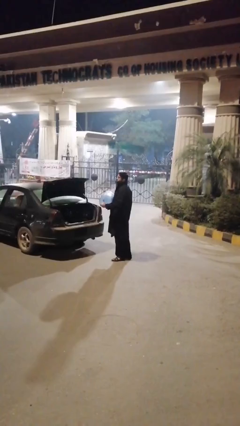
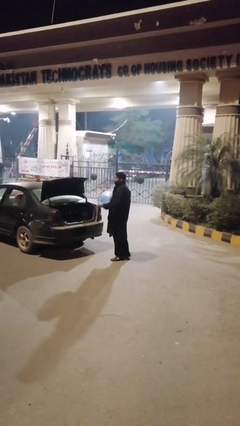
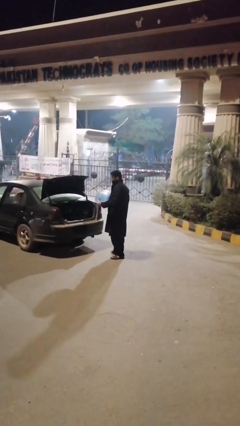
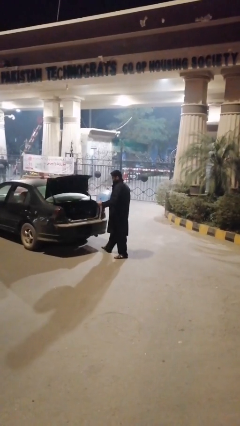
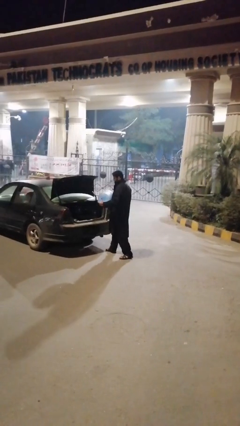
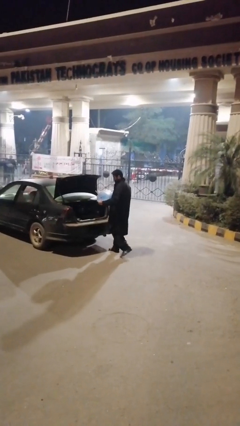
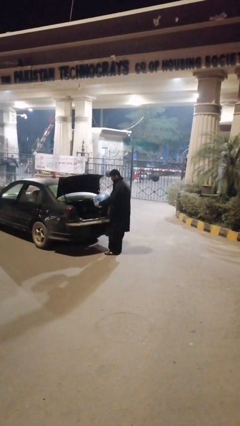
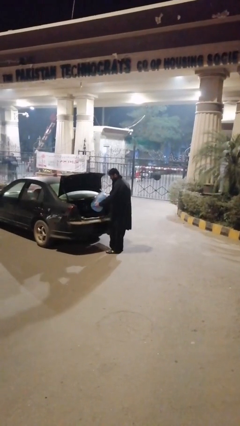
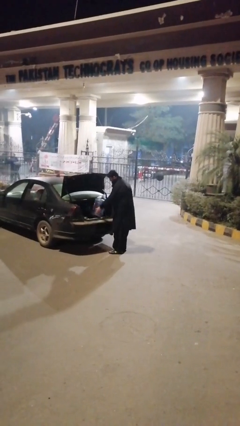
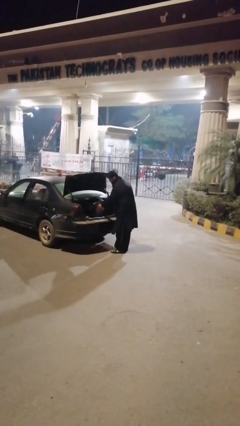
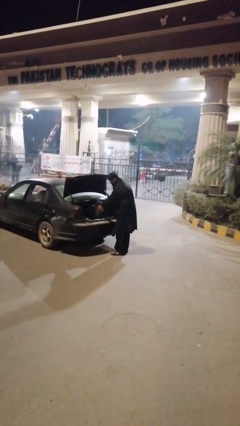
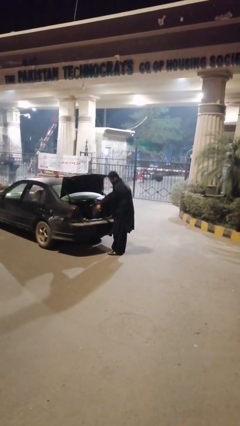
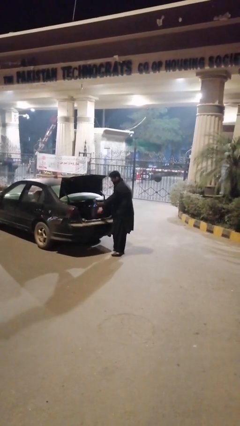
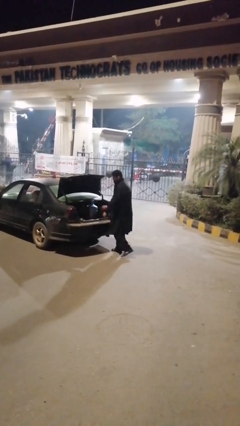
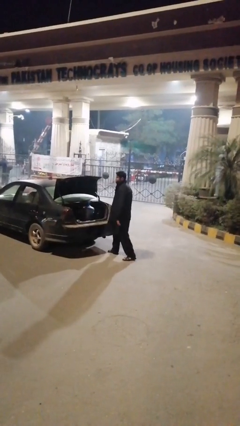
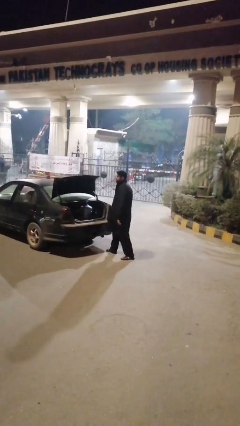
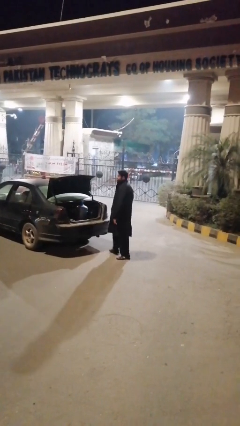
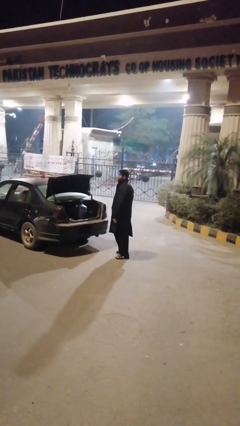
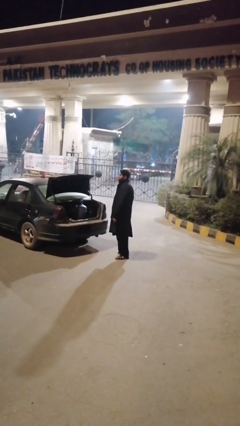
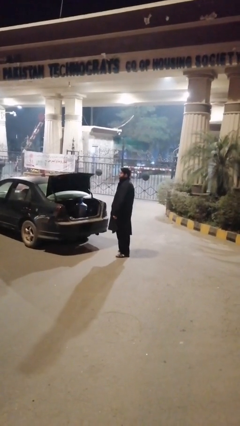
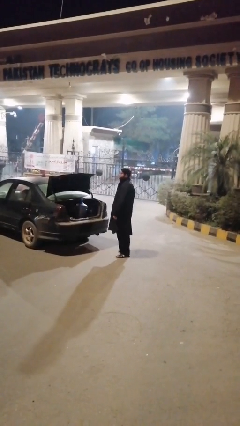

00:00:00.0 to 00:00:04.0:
person loads car

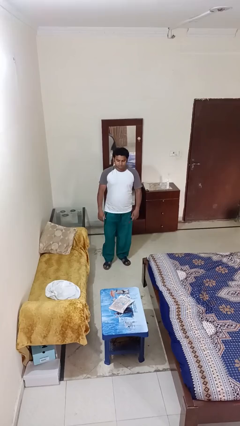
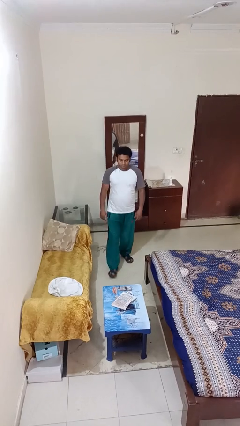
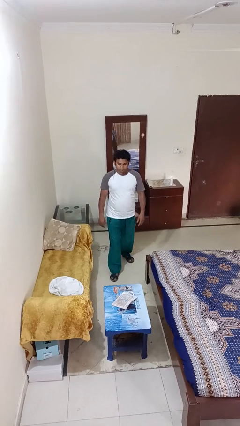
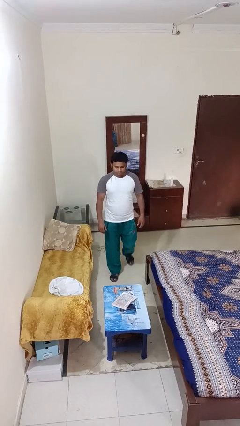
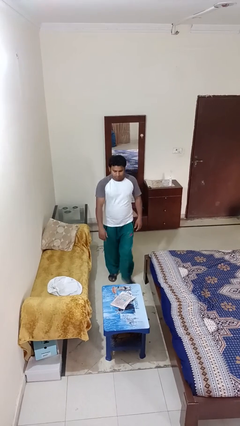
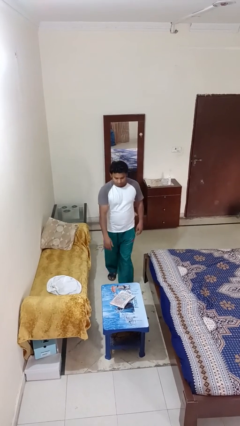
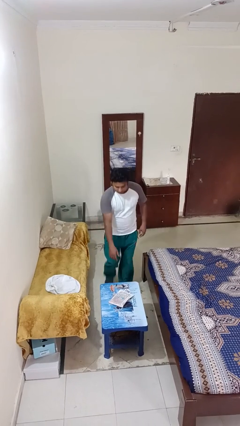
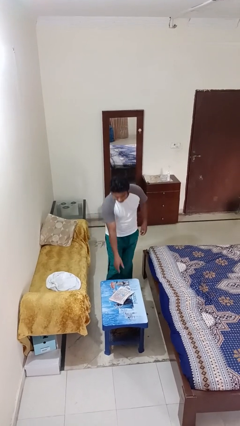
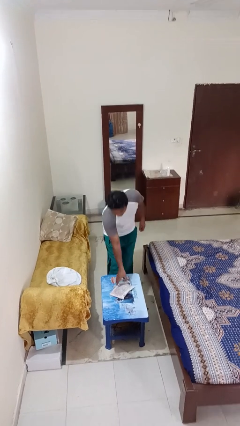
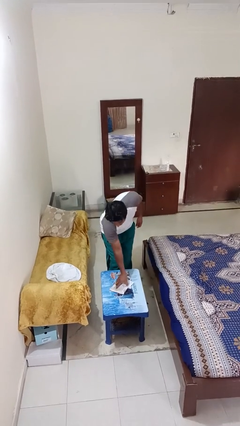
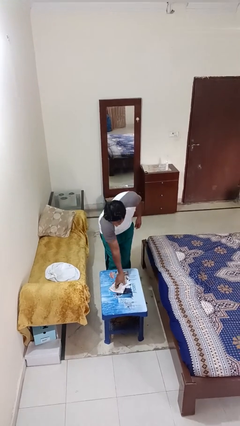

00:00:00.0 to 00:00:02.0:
person picks up object from table

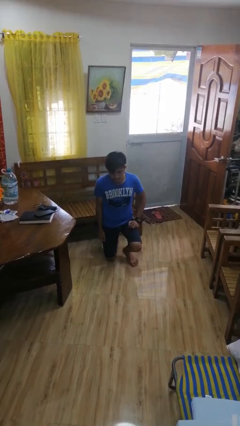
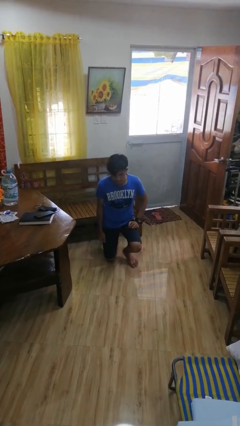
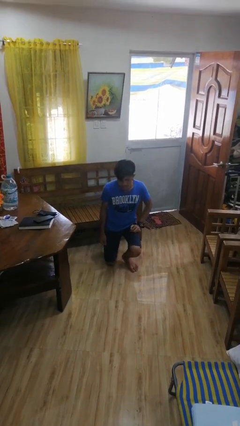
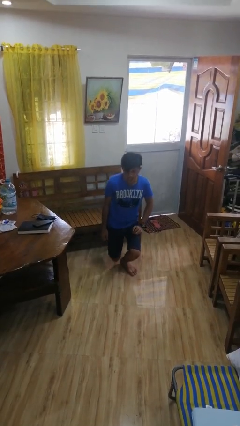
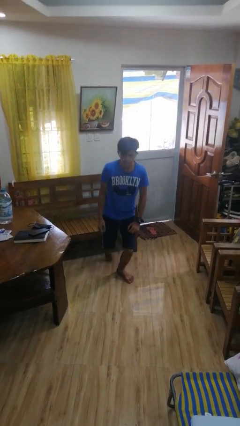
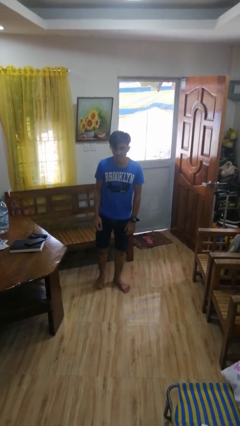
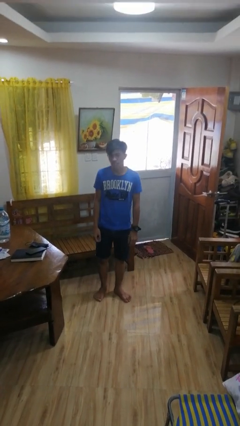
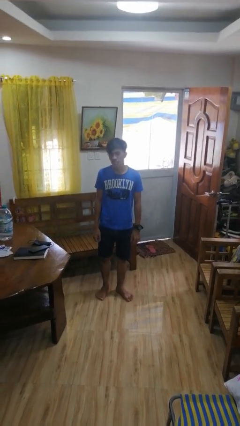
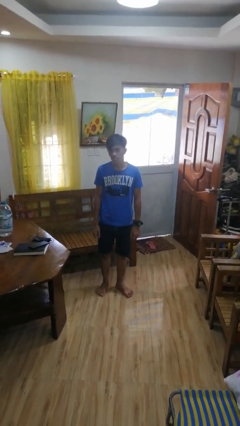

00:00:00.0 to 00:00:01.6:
person stands up from floor

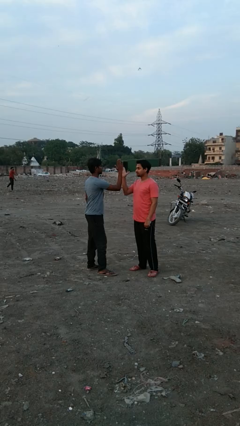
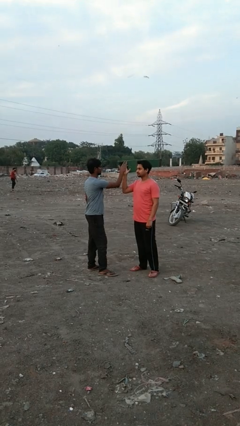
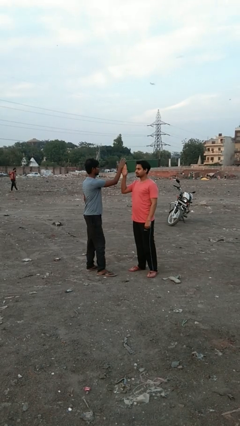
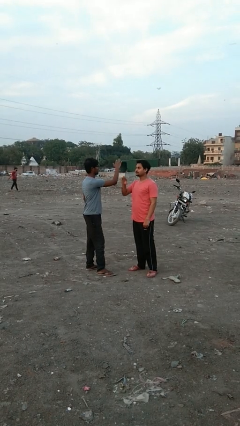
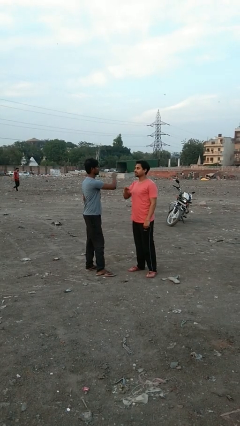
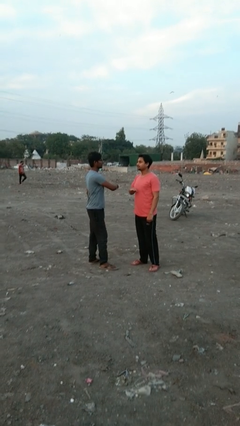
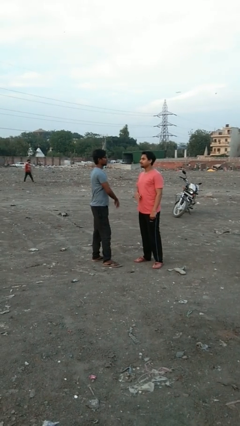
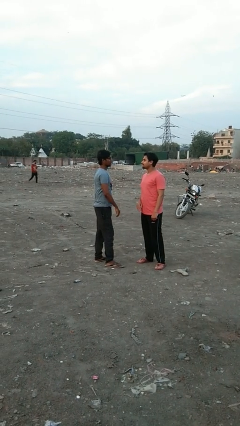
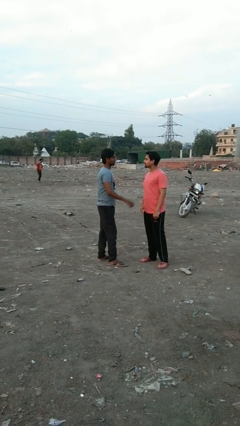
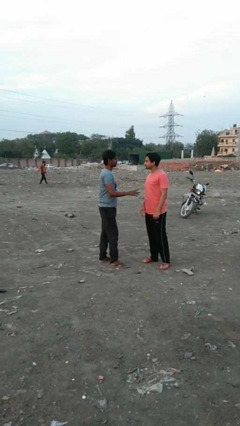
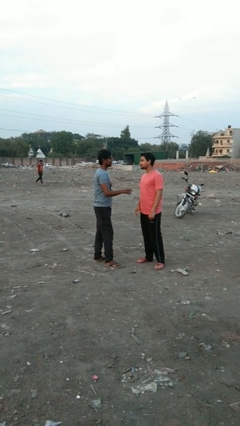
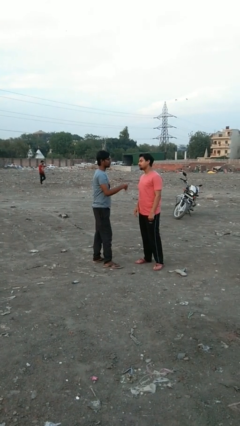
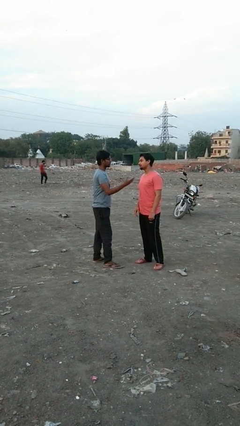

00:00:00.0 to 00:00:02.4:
person highfives hand

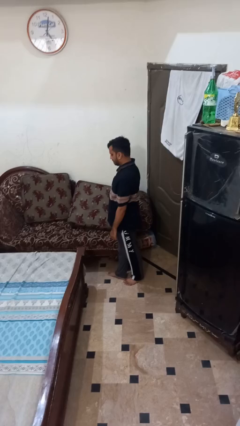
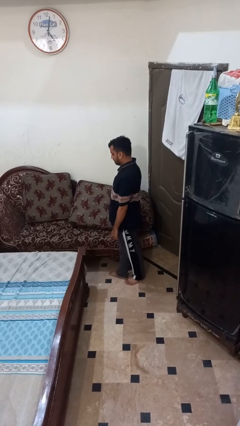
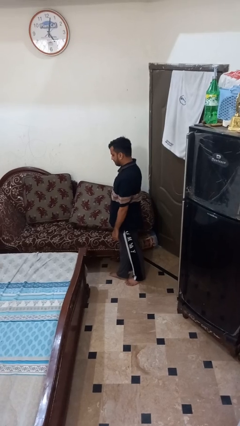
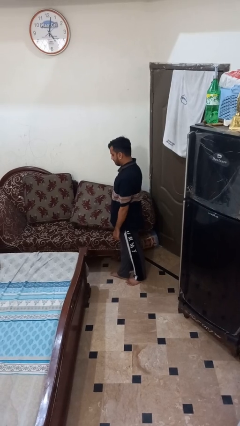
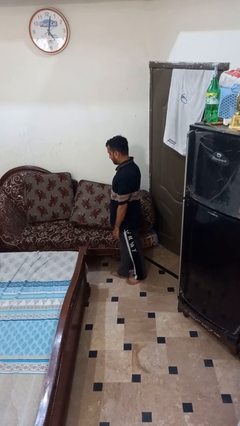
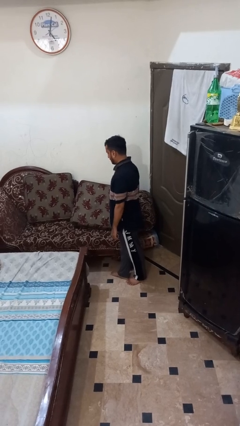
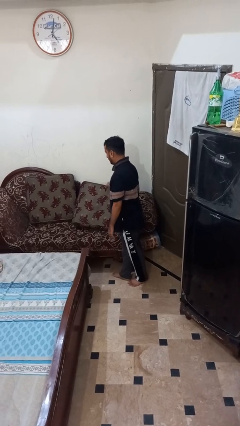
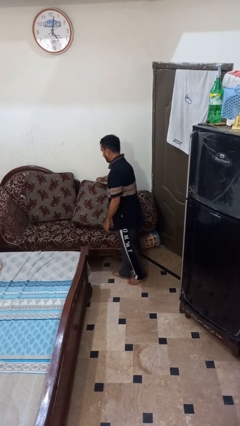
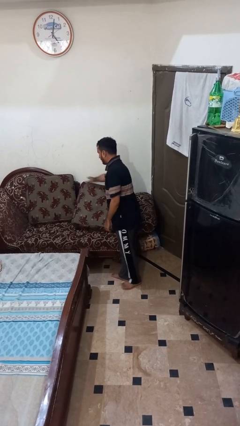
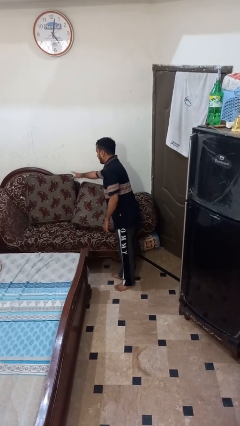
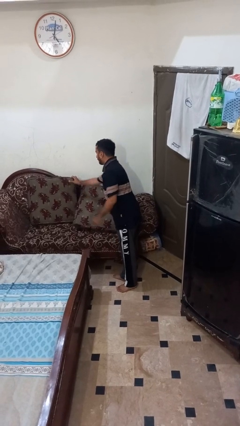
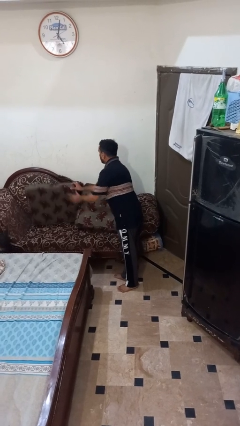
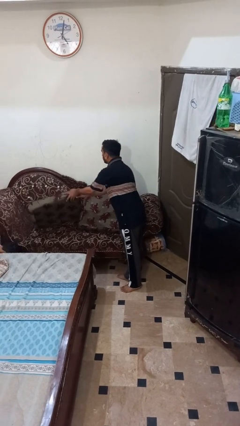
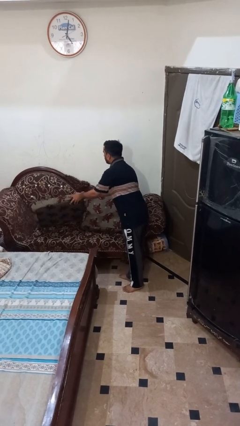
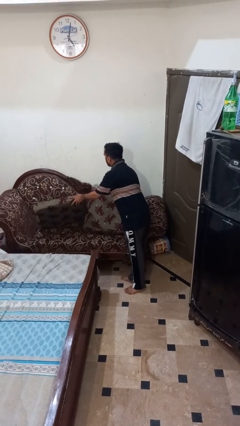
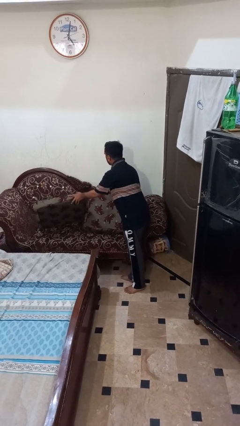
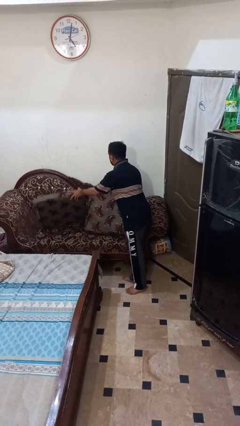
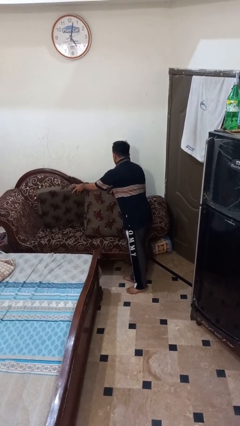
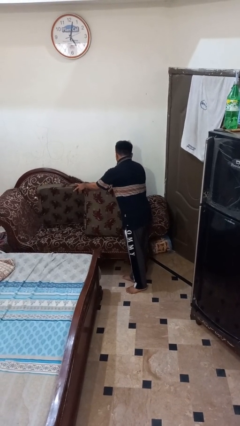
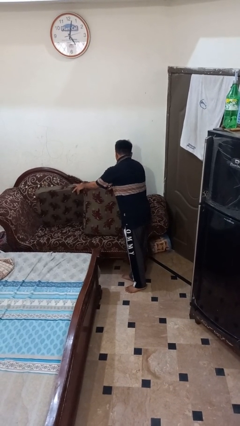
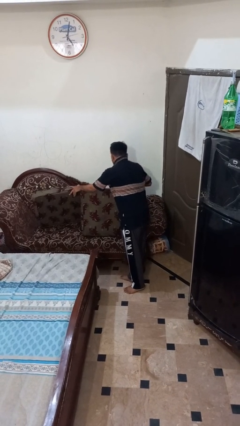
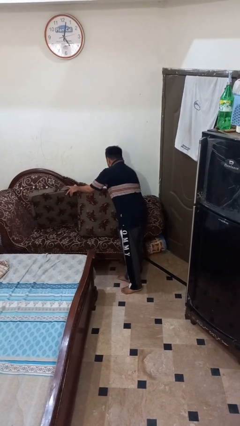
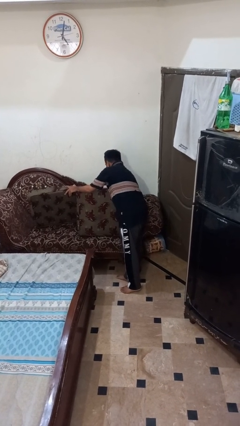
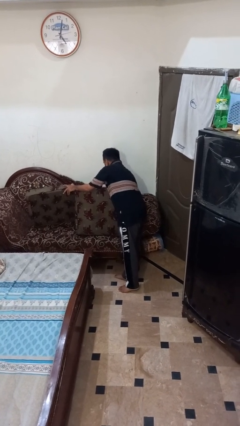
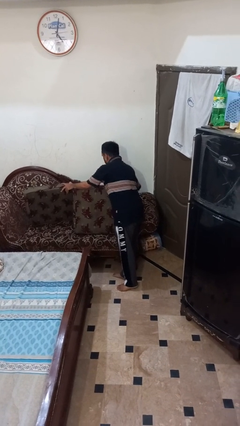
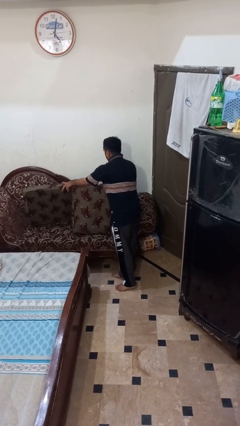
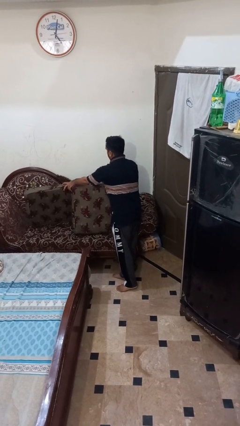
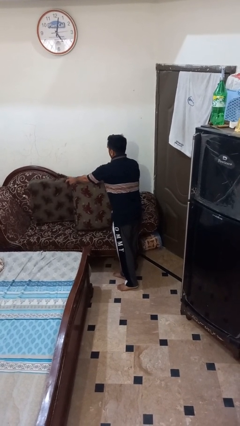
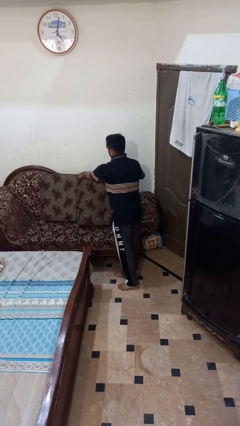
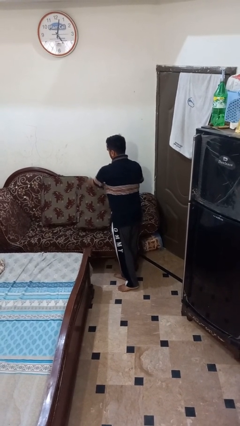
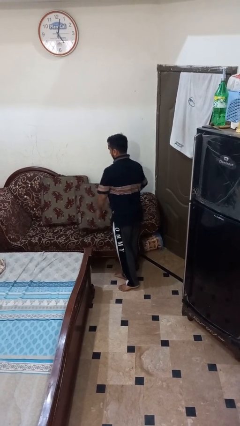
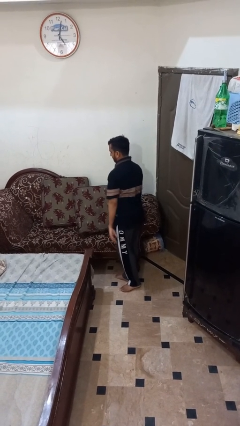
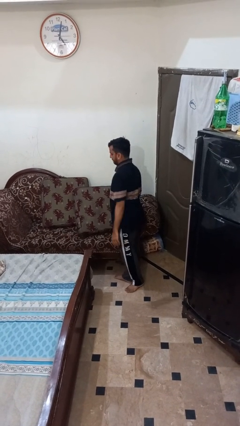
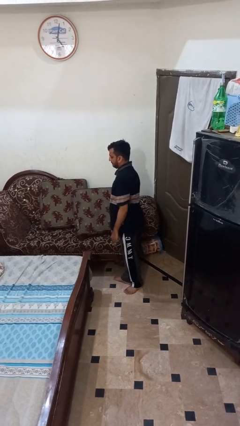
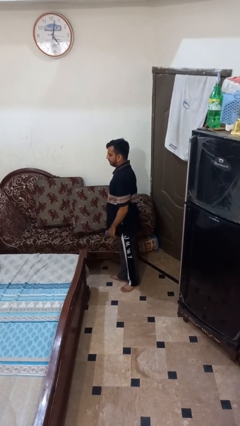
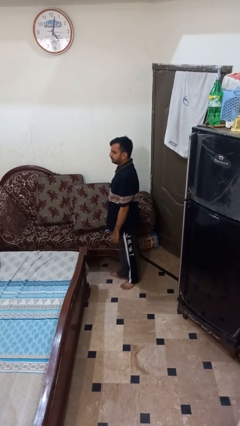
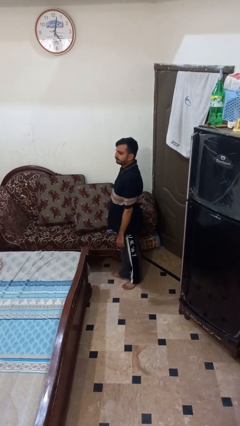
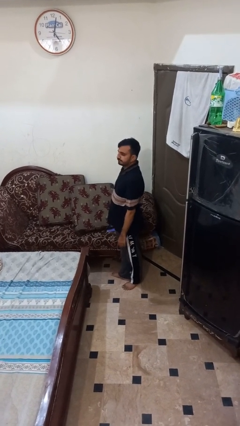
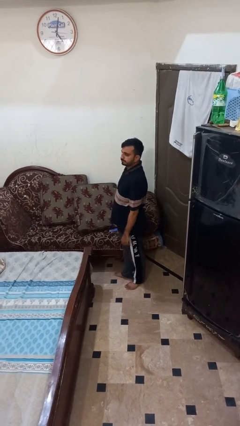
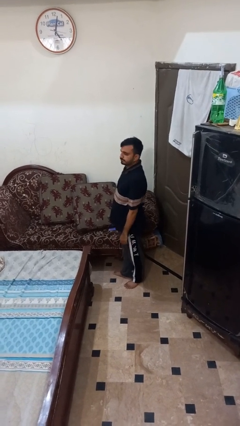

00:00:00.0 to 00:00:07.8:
person searches in couch
